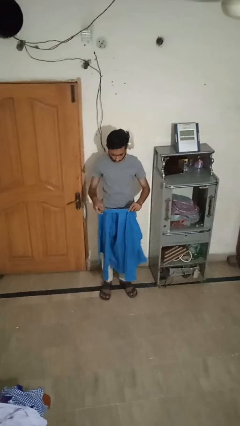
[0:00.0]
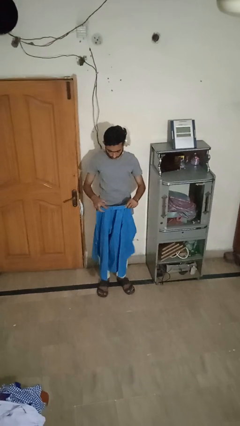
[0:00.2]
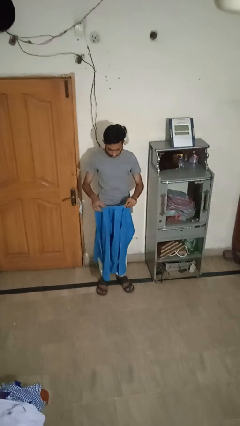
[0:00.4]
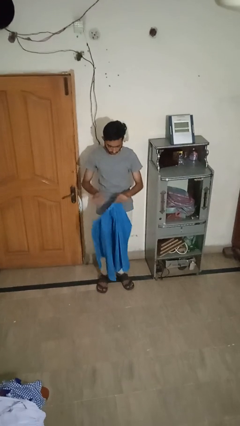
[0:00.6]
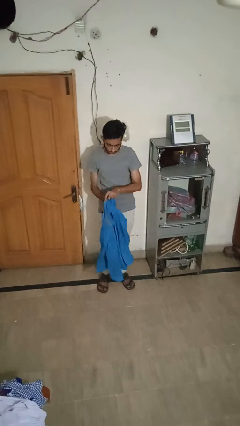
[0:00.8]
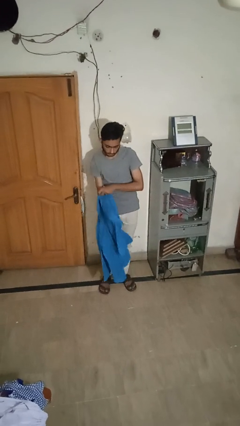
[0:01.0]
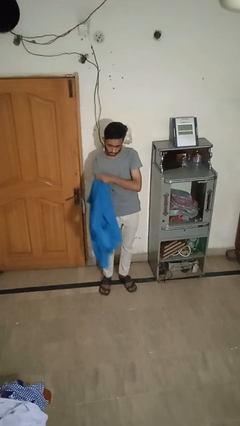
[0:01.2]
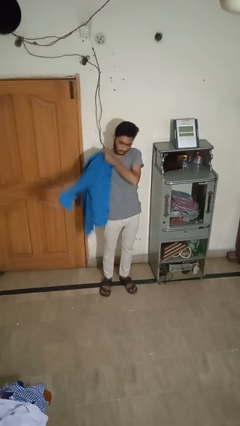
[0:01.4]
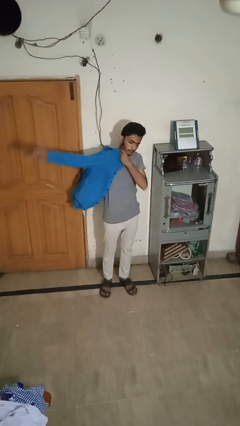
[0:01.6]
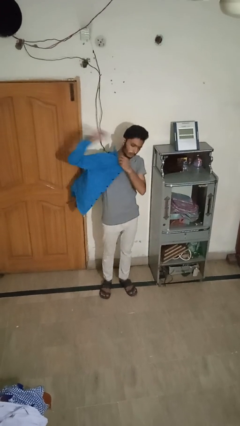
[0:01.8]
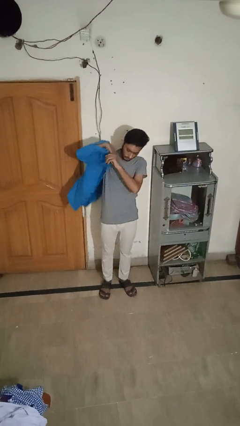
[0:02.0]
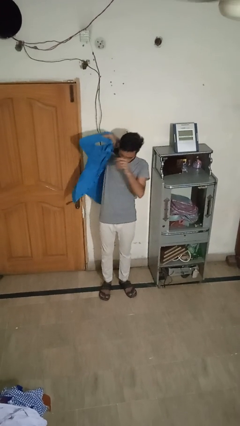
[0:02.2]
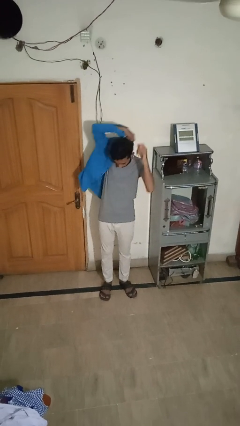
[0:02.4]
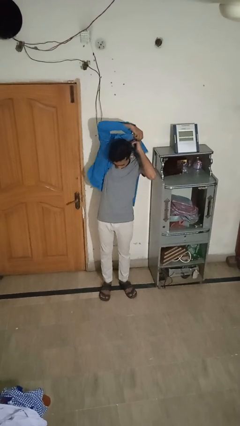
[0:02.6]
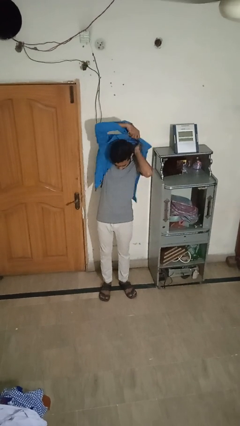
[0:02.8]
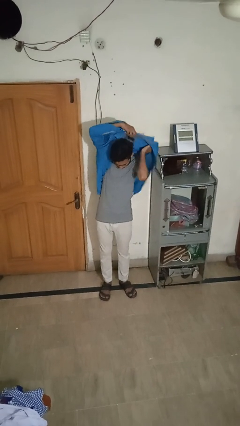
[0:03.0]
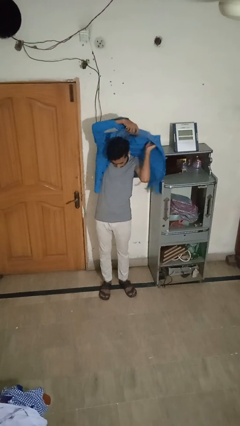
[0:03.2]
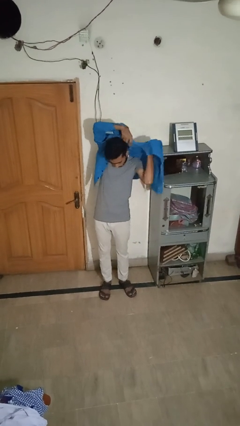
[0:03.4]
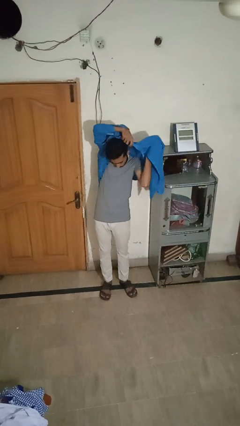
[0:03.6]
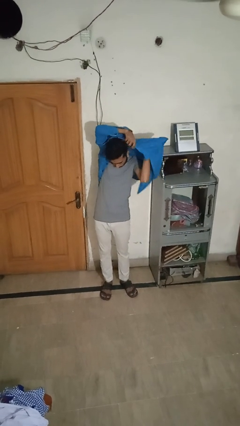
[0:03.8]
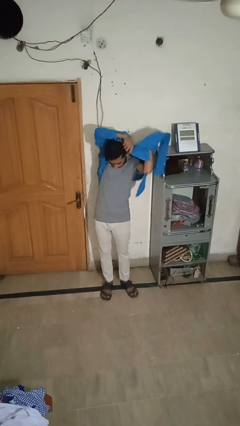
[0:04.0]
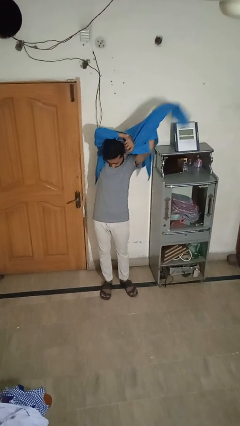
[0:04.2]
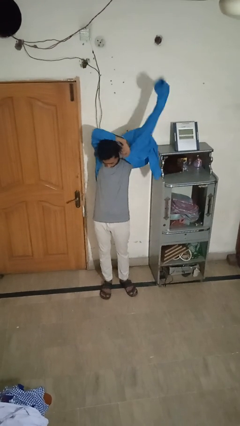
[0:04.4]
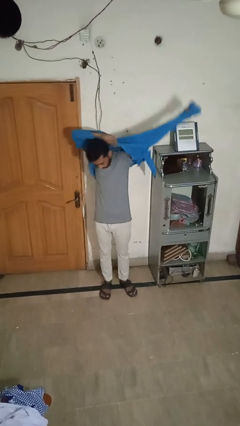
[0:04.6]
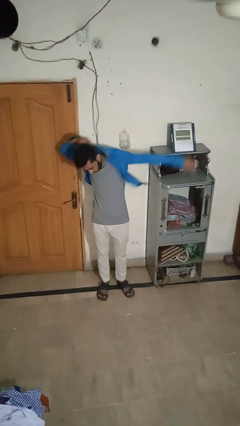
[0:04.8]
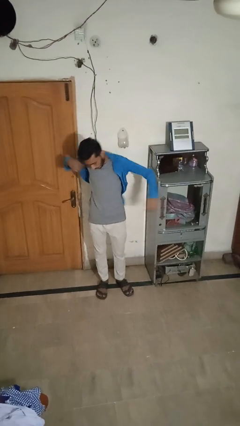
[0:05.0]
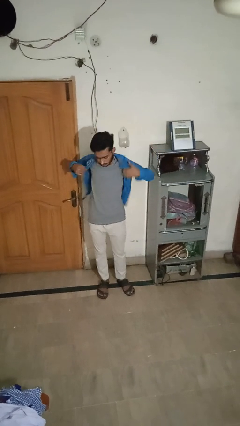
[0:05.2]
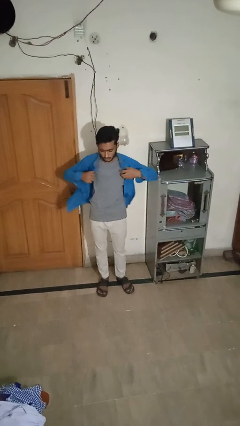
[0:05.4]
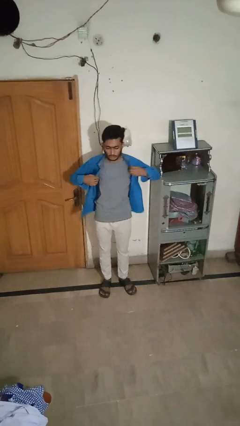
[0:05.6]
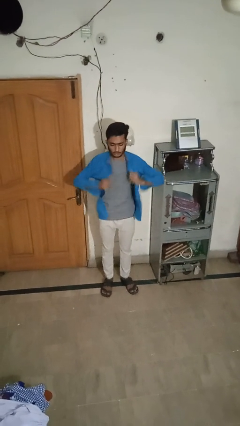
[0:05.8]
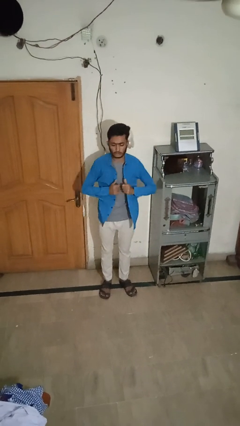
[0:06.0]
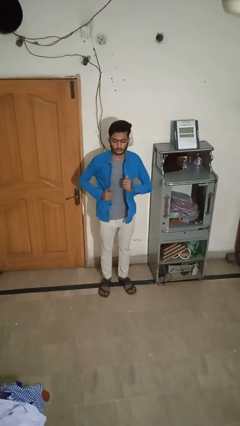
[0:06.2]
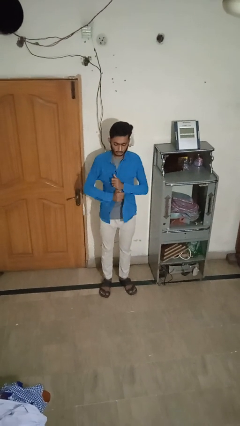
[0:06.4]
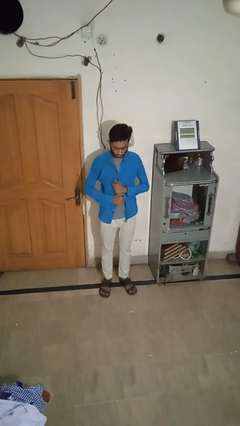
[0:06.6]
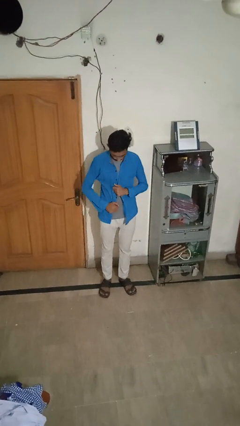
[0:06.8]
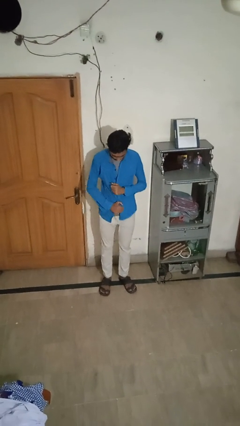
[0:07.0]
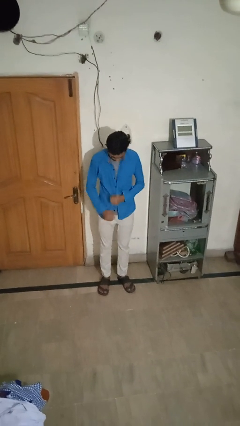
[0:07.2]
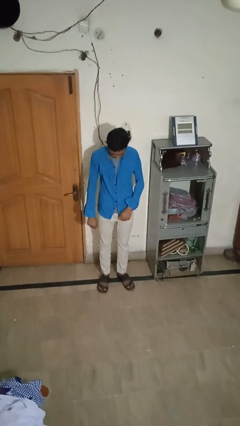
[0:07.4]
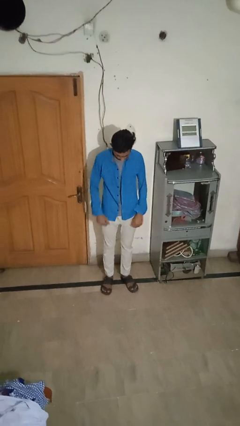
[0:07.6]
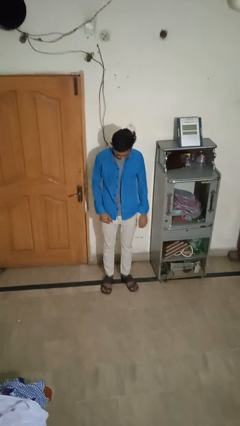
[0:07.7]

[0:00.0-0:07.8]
person puts on shirt

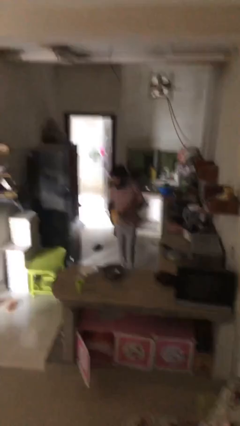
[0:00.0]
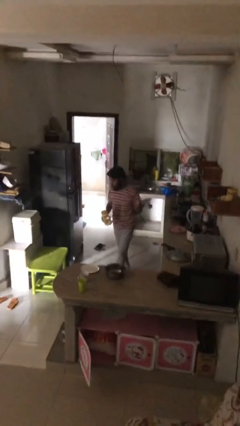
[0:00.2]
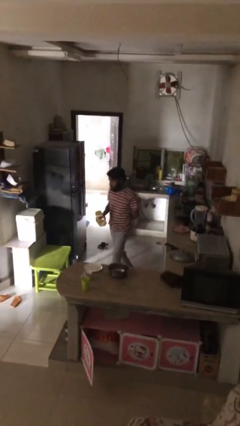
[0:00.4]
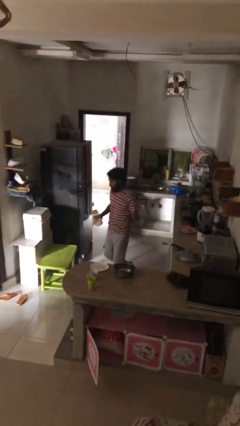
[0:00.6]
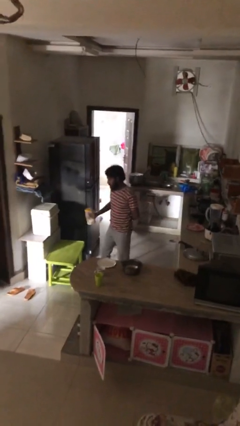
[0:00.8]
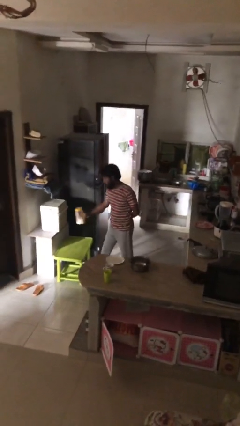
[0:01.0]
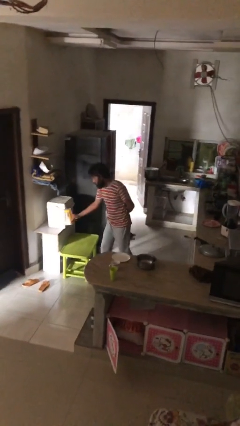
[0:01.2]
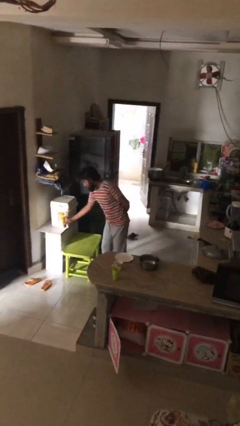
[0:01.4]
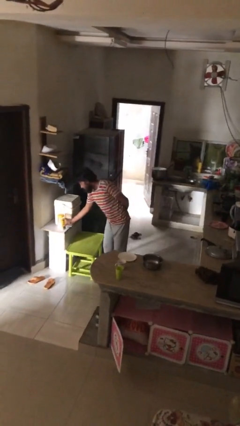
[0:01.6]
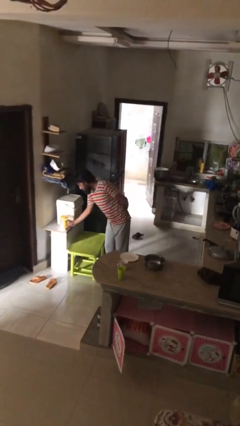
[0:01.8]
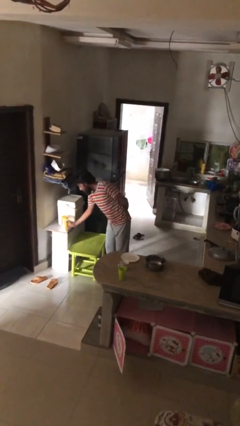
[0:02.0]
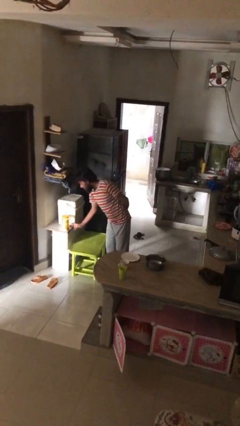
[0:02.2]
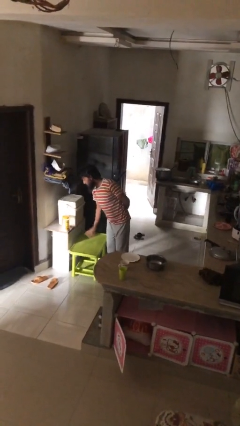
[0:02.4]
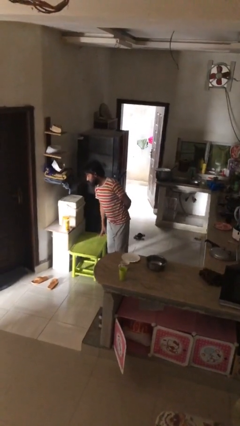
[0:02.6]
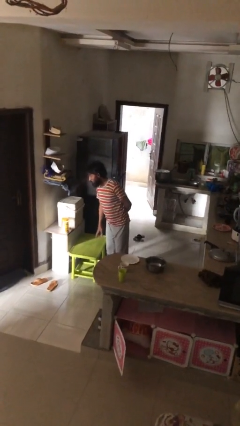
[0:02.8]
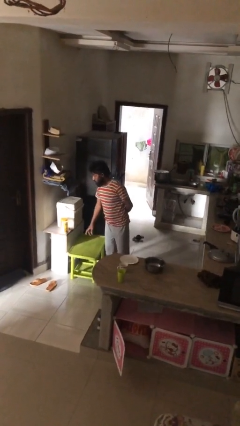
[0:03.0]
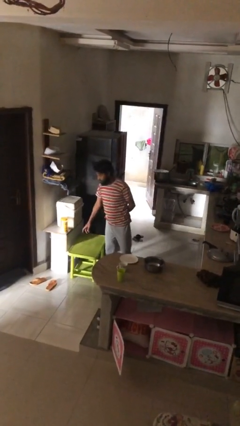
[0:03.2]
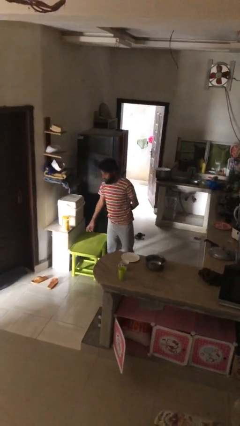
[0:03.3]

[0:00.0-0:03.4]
person puts down object on table

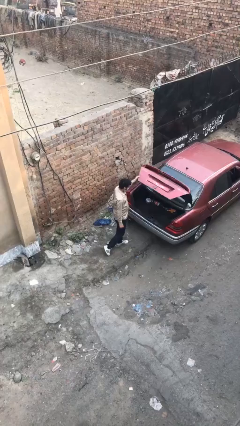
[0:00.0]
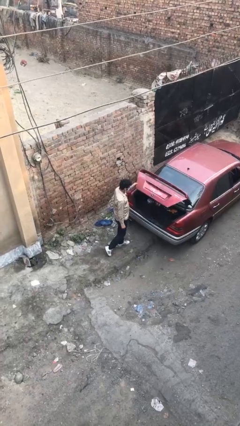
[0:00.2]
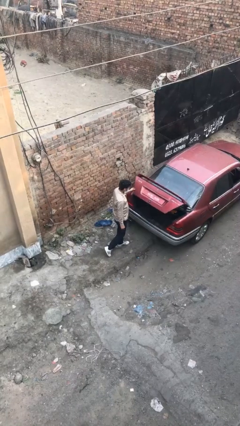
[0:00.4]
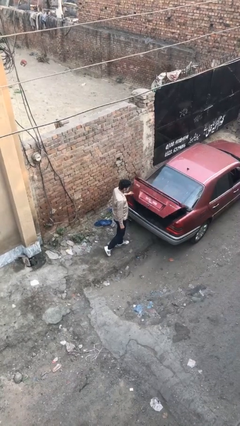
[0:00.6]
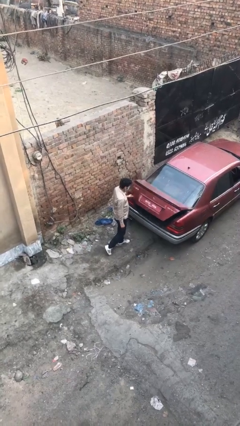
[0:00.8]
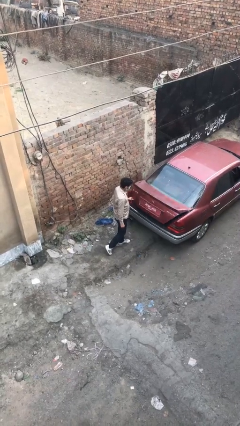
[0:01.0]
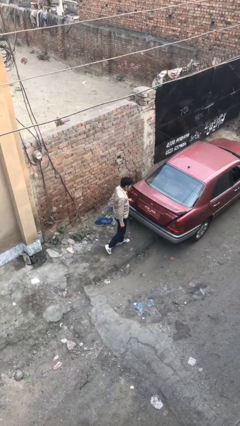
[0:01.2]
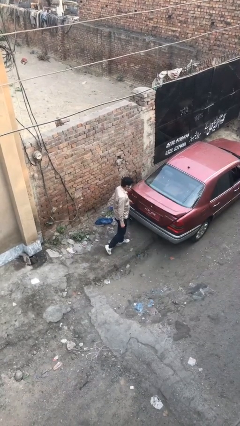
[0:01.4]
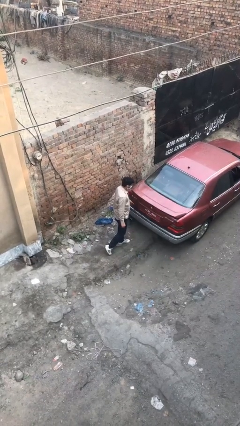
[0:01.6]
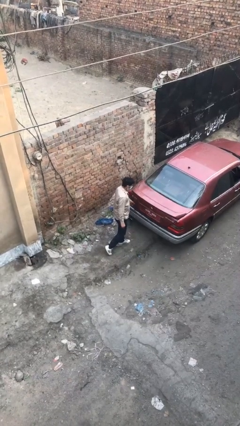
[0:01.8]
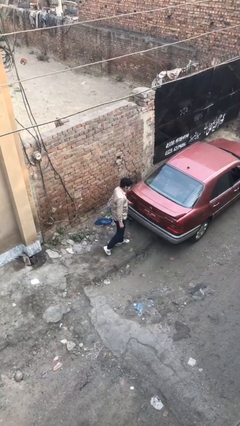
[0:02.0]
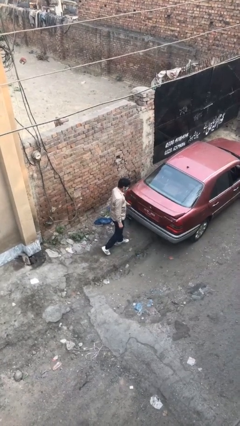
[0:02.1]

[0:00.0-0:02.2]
person closes car trunk

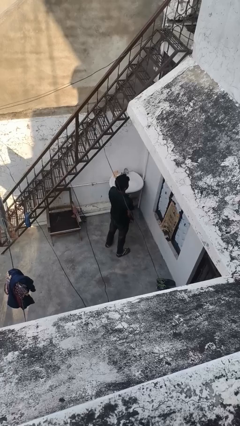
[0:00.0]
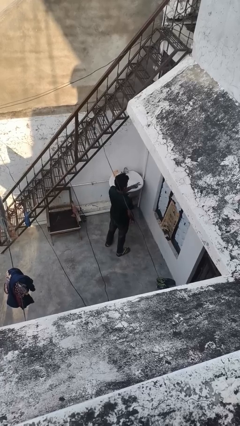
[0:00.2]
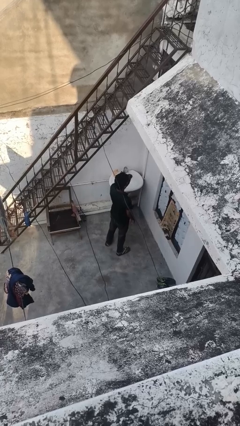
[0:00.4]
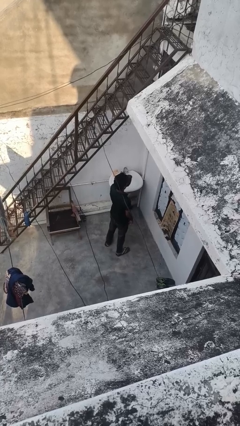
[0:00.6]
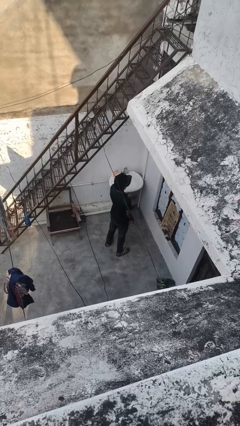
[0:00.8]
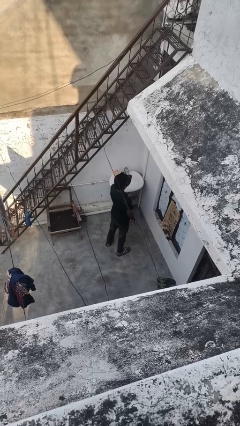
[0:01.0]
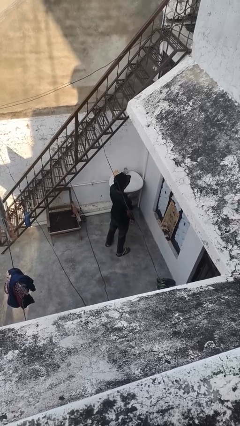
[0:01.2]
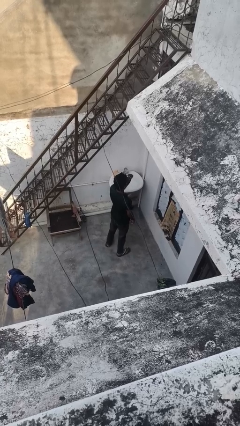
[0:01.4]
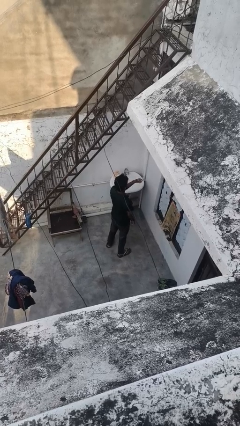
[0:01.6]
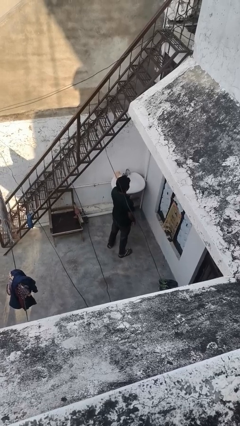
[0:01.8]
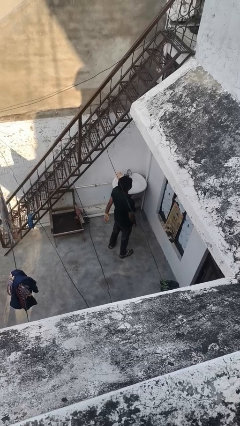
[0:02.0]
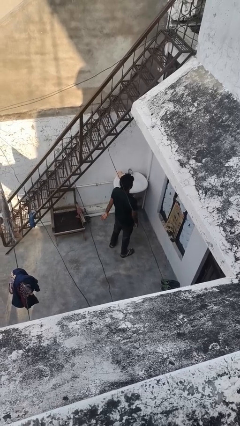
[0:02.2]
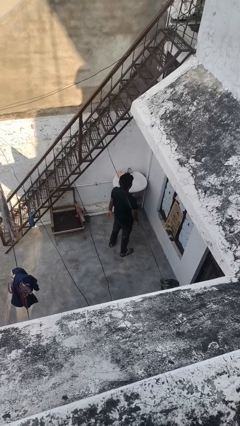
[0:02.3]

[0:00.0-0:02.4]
person gestures watch closely

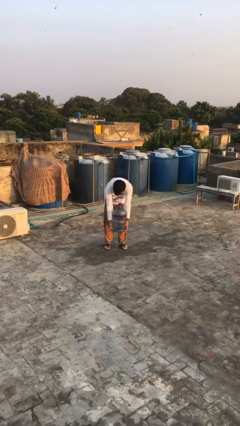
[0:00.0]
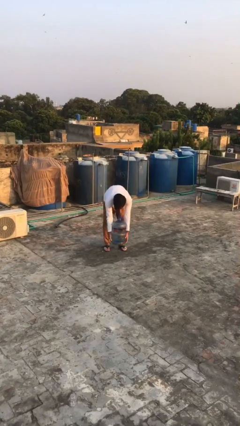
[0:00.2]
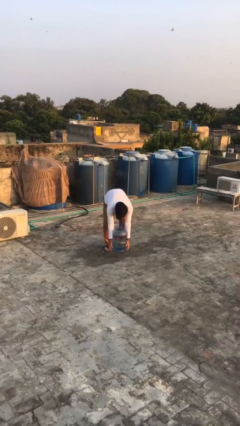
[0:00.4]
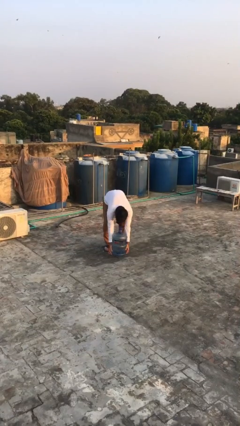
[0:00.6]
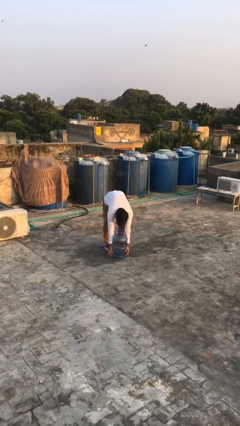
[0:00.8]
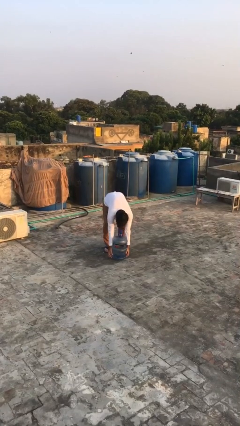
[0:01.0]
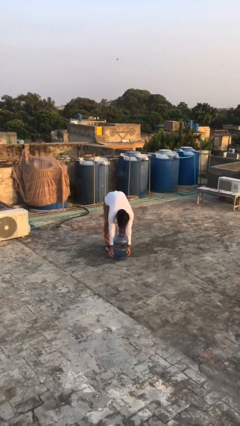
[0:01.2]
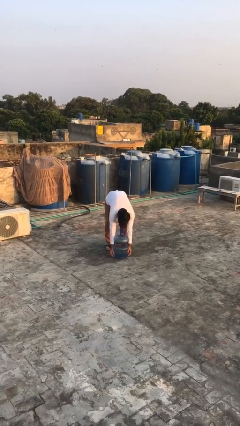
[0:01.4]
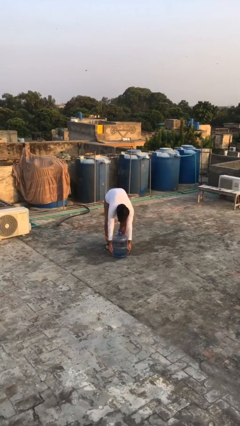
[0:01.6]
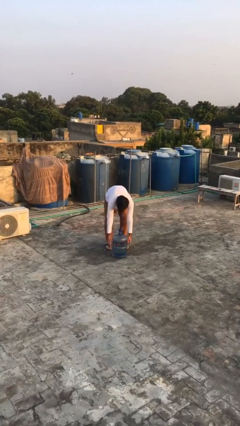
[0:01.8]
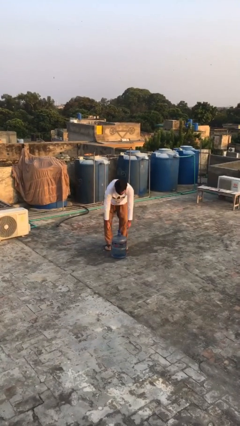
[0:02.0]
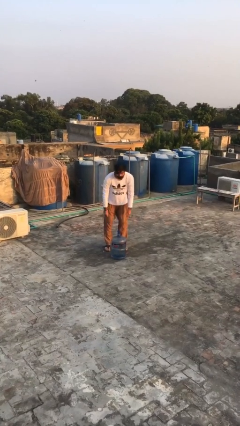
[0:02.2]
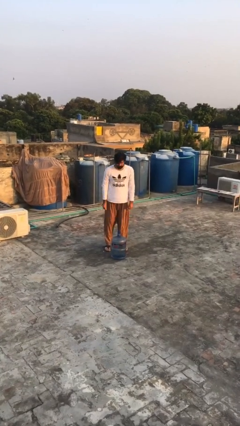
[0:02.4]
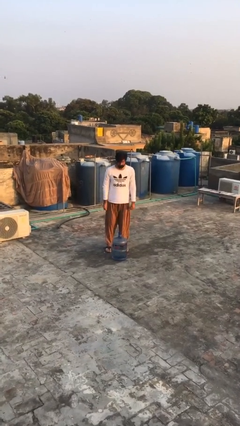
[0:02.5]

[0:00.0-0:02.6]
person puts down object on floor
